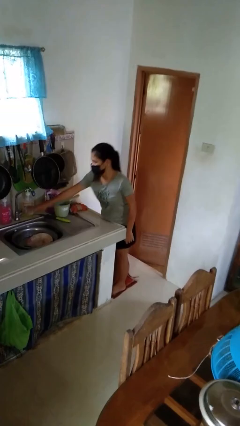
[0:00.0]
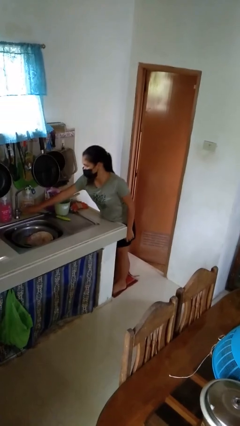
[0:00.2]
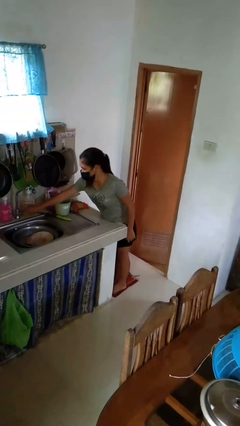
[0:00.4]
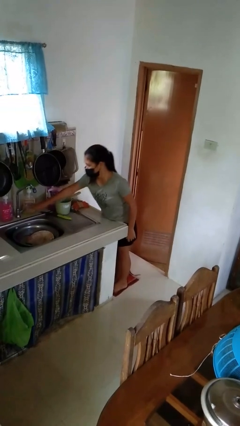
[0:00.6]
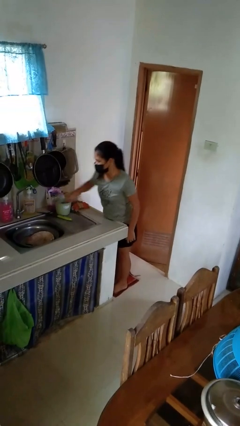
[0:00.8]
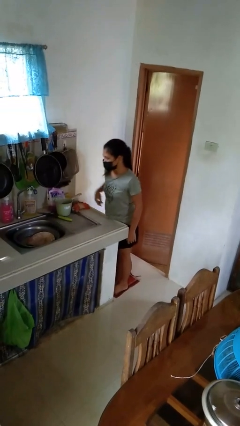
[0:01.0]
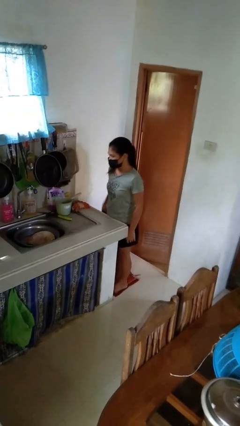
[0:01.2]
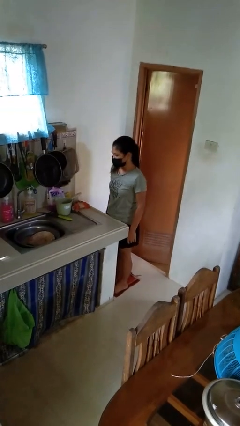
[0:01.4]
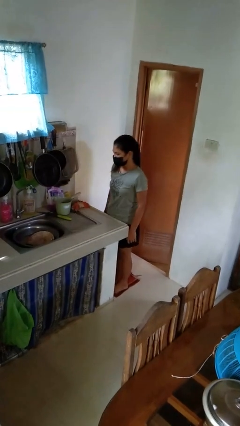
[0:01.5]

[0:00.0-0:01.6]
person turns off faucet

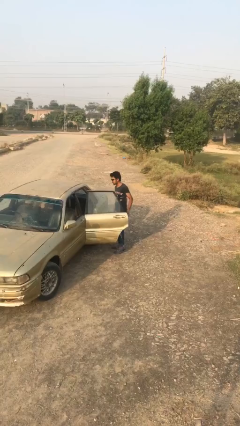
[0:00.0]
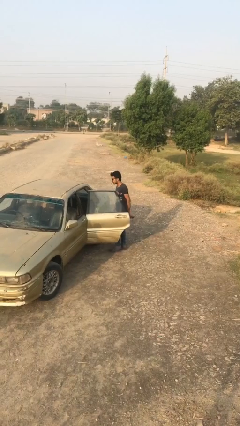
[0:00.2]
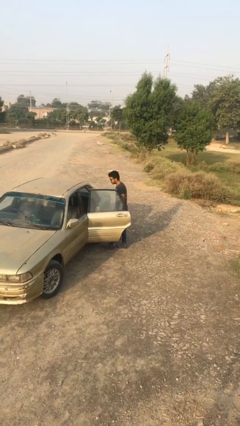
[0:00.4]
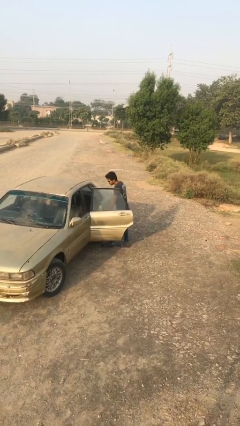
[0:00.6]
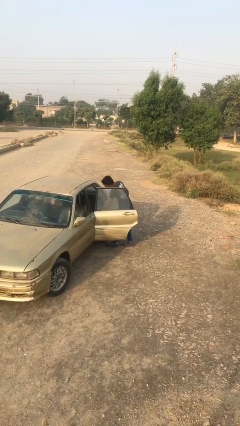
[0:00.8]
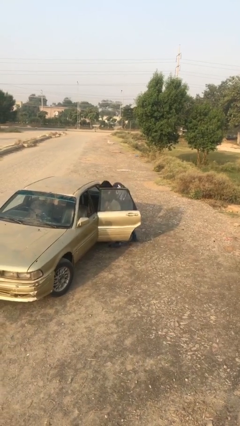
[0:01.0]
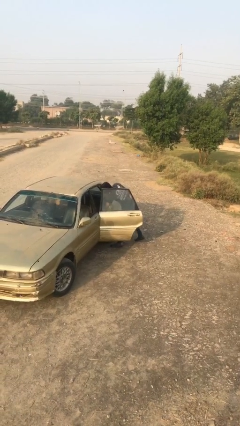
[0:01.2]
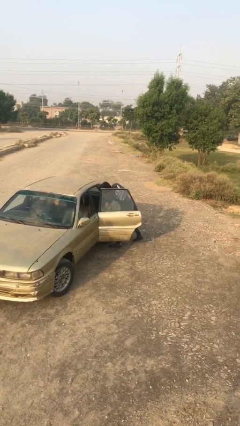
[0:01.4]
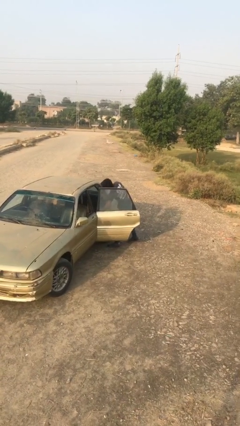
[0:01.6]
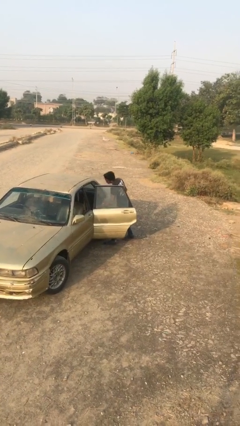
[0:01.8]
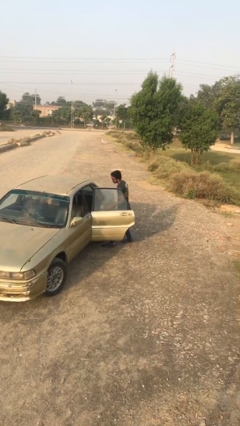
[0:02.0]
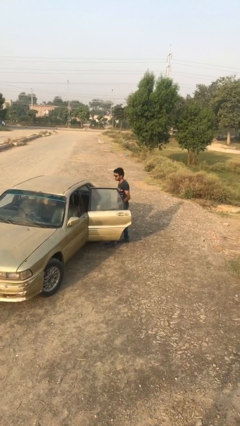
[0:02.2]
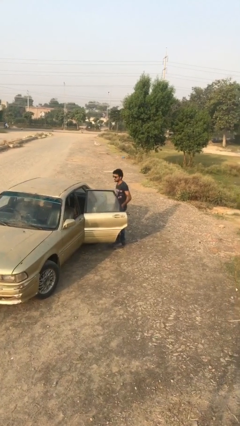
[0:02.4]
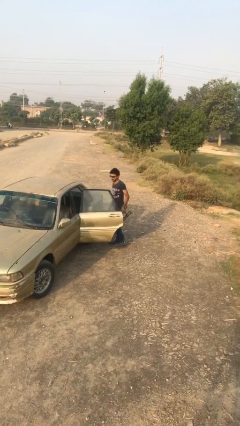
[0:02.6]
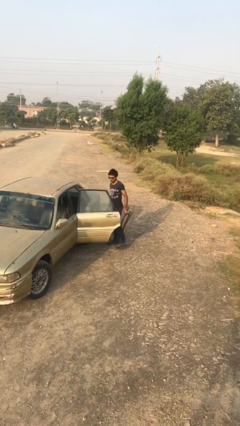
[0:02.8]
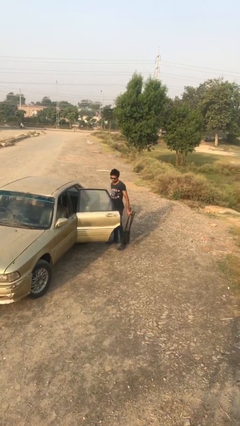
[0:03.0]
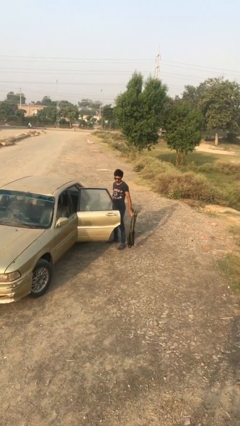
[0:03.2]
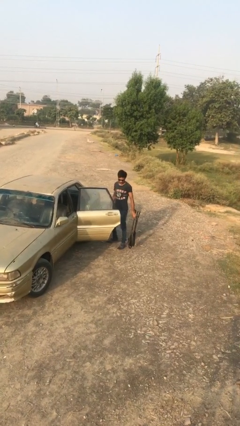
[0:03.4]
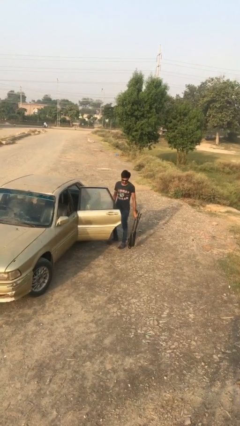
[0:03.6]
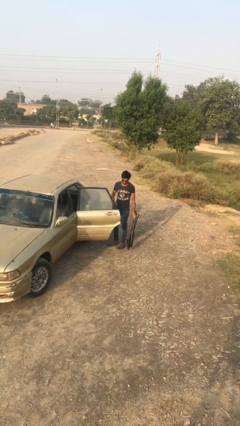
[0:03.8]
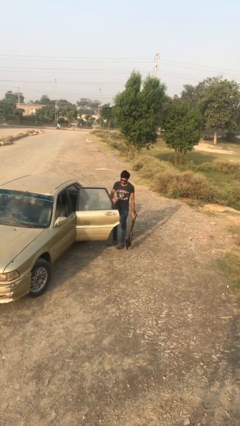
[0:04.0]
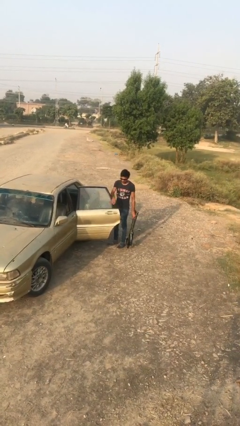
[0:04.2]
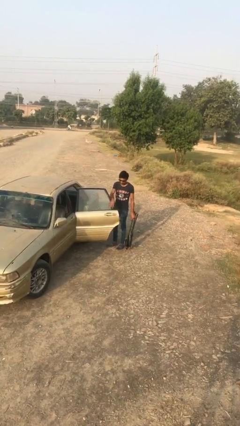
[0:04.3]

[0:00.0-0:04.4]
person unloads car

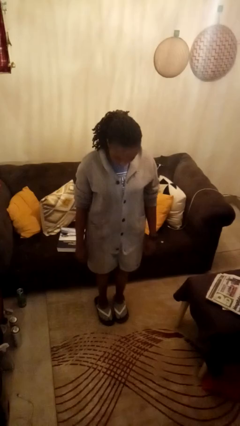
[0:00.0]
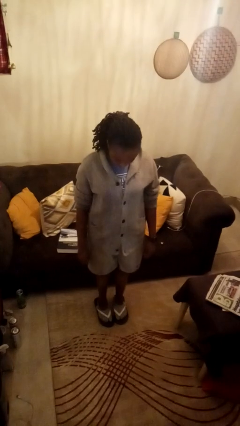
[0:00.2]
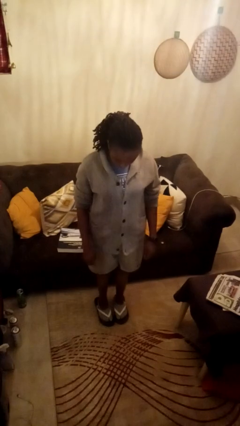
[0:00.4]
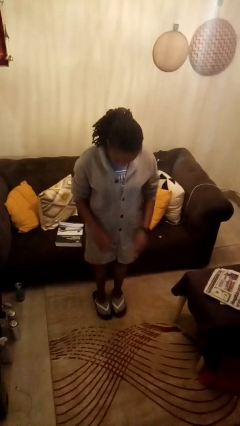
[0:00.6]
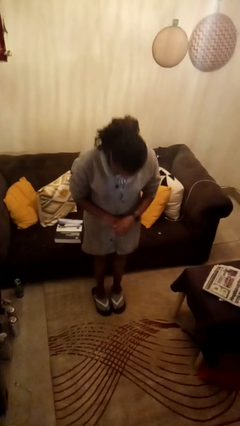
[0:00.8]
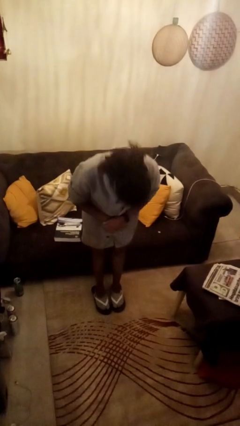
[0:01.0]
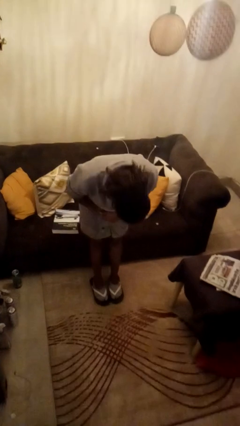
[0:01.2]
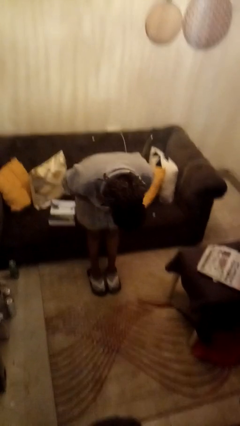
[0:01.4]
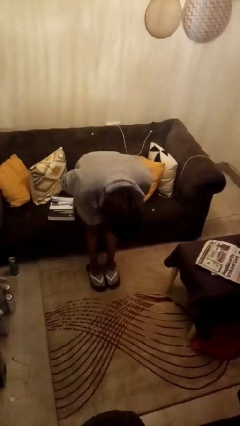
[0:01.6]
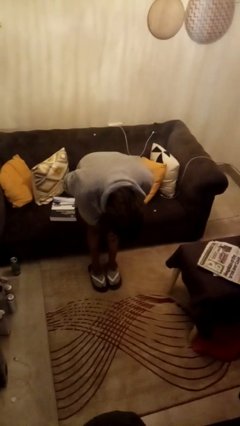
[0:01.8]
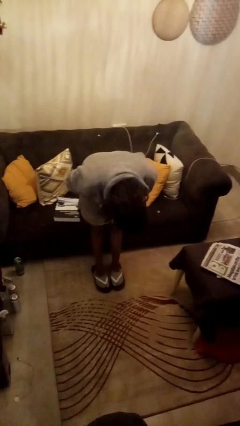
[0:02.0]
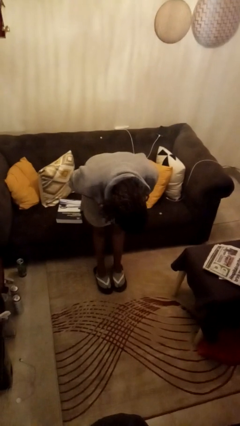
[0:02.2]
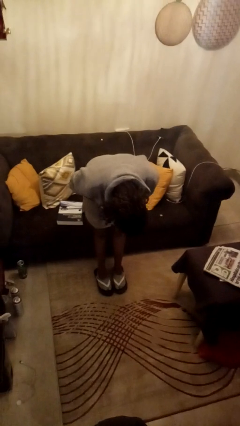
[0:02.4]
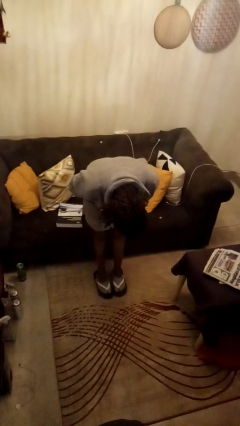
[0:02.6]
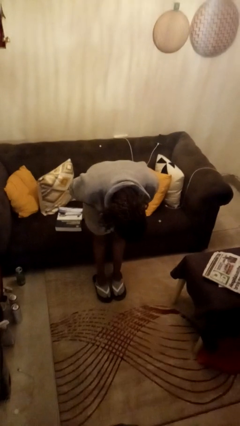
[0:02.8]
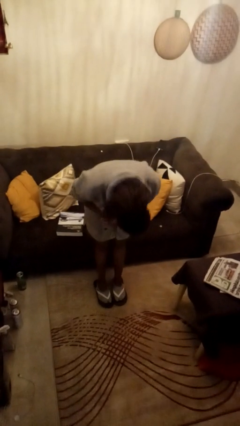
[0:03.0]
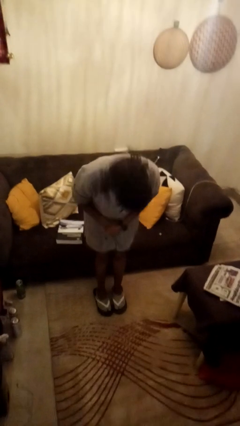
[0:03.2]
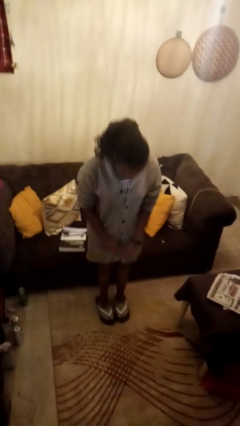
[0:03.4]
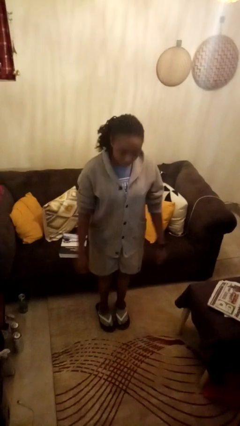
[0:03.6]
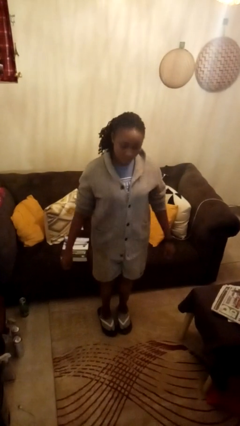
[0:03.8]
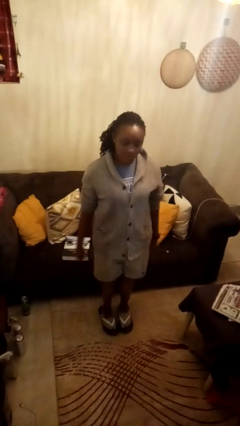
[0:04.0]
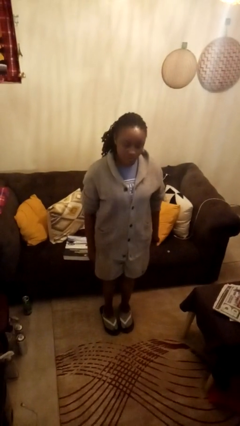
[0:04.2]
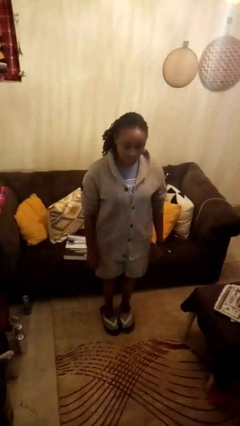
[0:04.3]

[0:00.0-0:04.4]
person bows

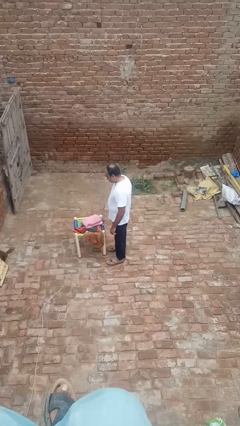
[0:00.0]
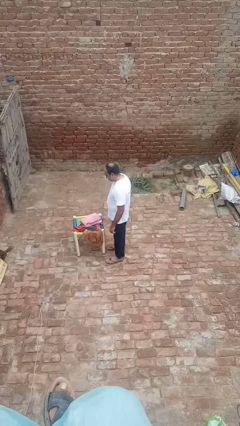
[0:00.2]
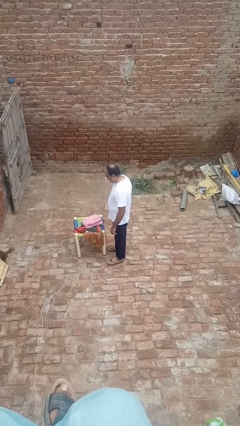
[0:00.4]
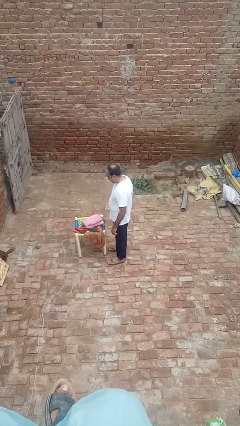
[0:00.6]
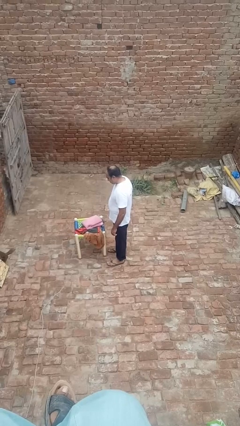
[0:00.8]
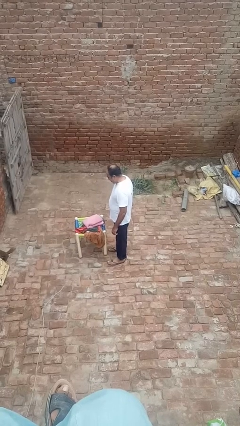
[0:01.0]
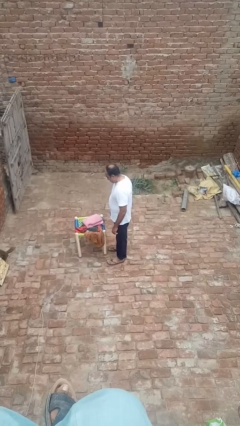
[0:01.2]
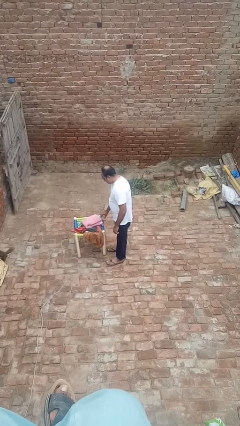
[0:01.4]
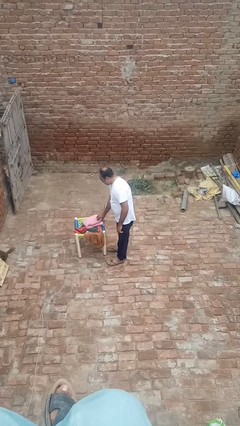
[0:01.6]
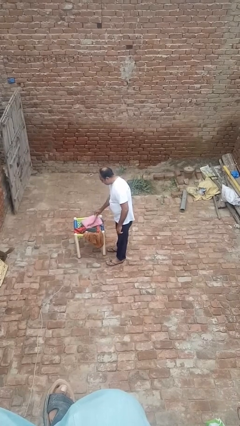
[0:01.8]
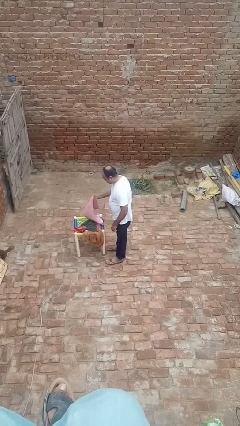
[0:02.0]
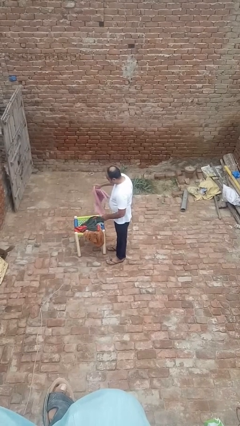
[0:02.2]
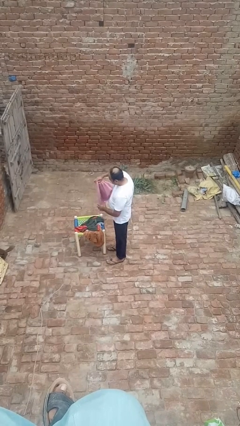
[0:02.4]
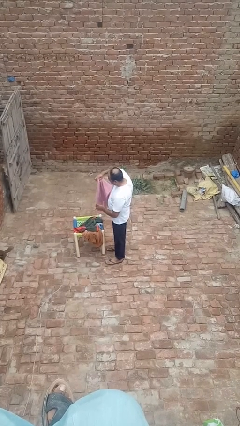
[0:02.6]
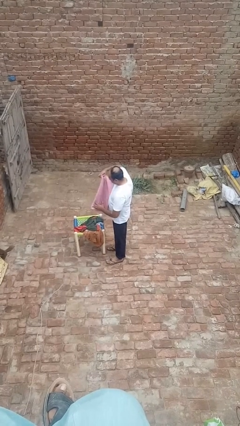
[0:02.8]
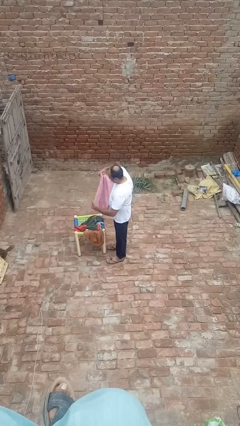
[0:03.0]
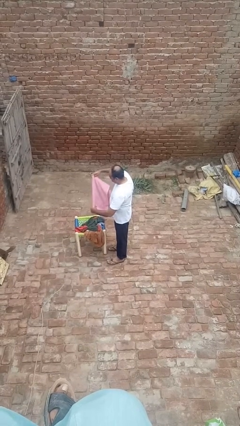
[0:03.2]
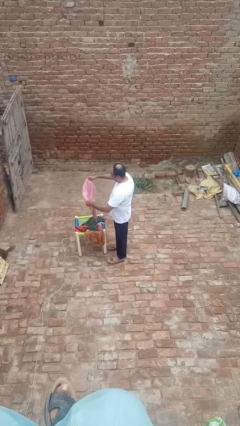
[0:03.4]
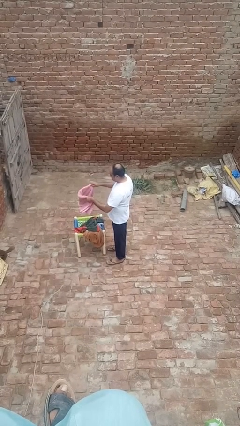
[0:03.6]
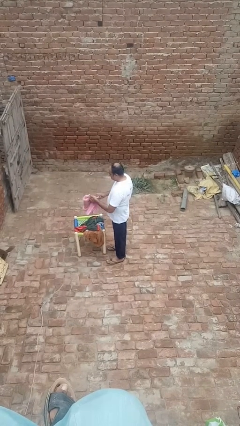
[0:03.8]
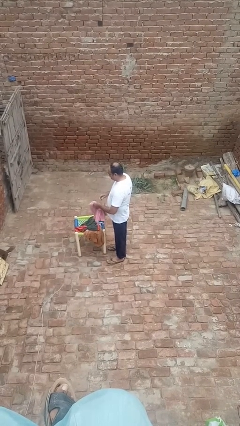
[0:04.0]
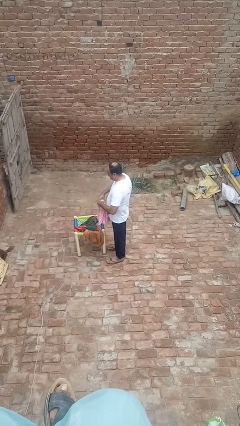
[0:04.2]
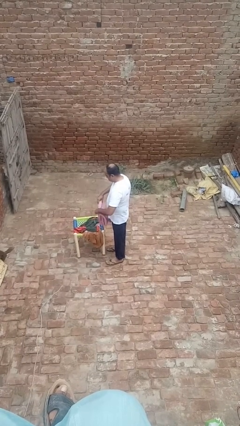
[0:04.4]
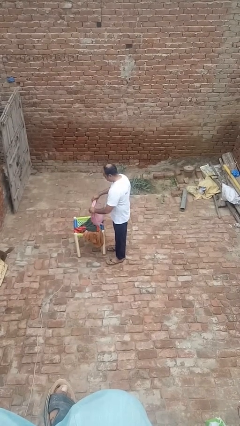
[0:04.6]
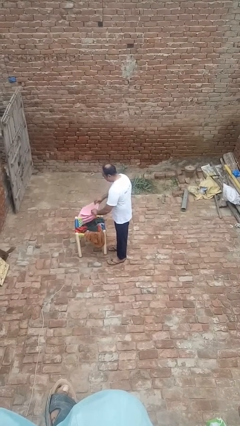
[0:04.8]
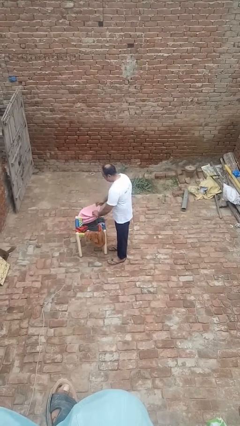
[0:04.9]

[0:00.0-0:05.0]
person folds towel

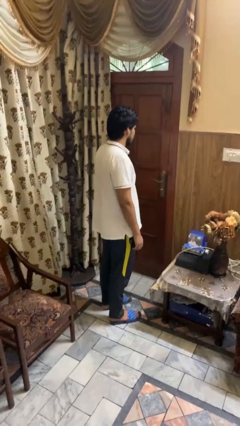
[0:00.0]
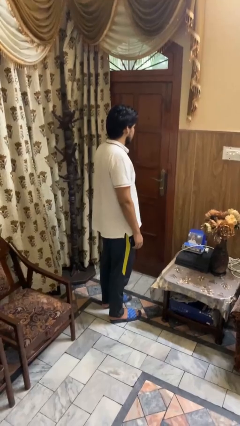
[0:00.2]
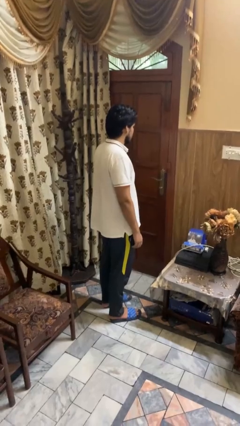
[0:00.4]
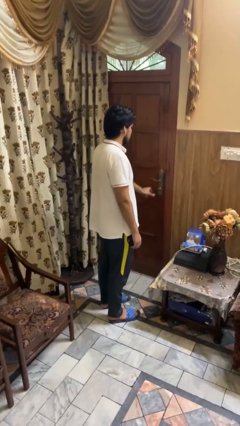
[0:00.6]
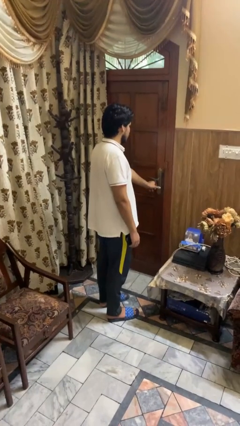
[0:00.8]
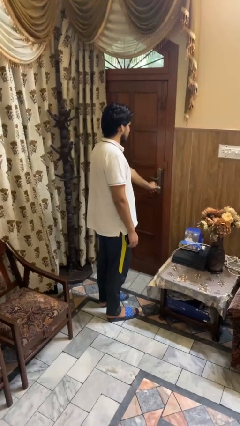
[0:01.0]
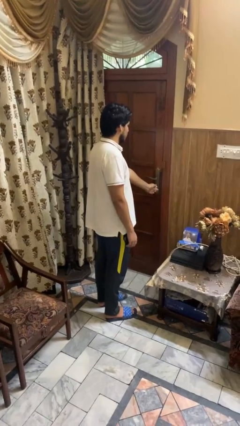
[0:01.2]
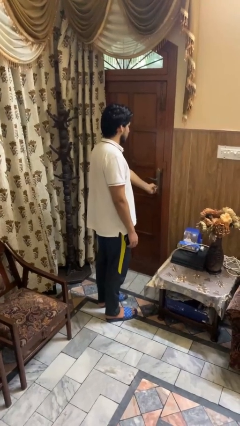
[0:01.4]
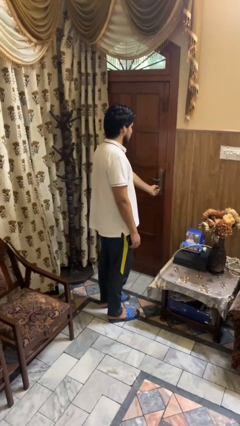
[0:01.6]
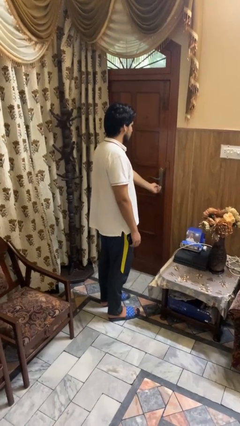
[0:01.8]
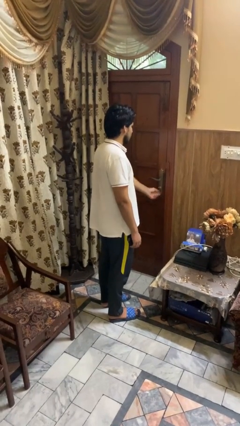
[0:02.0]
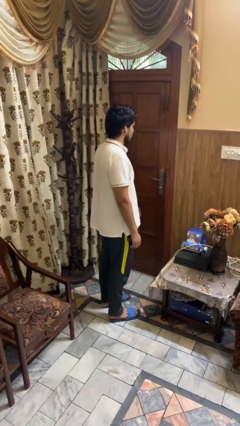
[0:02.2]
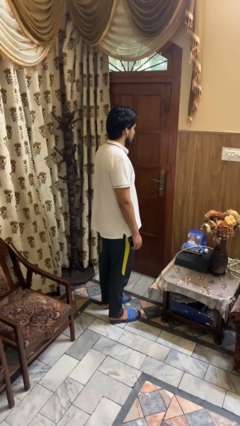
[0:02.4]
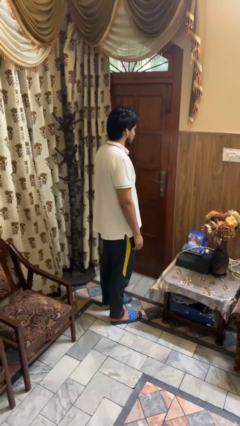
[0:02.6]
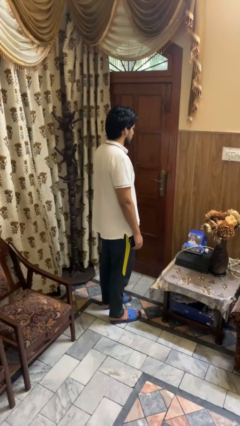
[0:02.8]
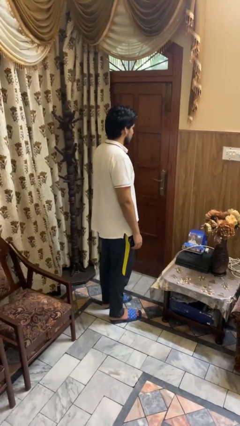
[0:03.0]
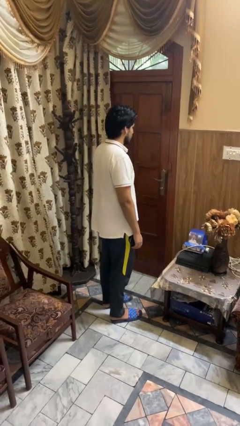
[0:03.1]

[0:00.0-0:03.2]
person unlocks door with keys
